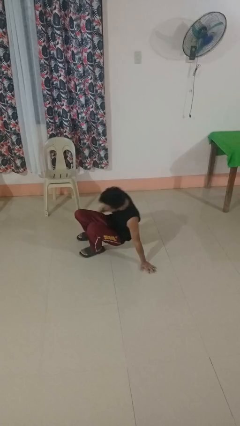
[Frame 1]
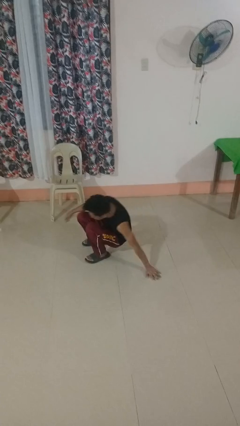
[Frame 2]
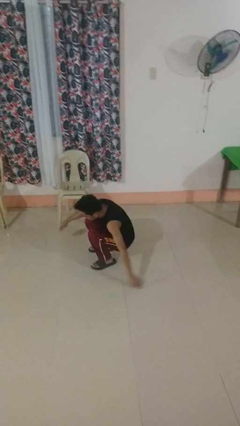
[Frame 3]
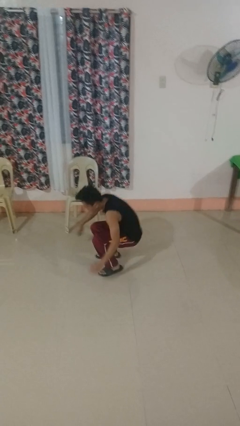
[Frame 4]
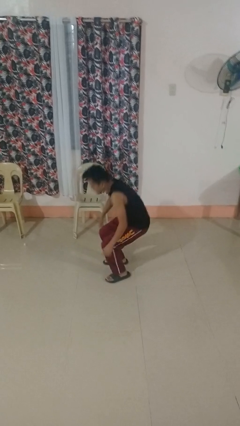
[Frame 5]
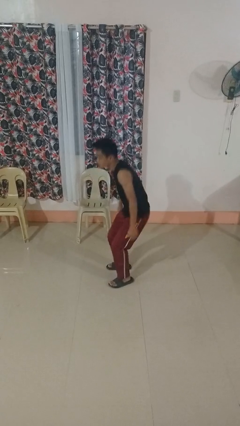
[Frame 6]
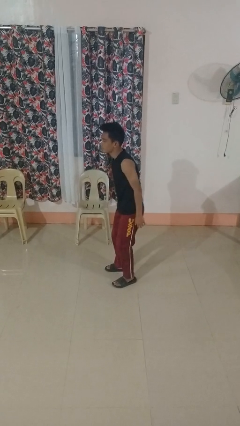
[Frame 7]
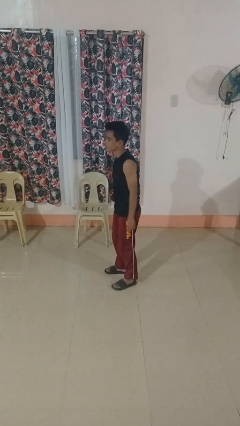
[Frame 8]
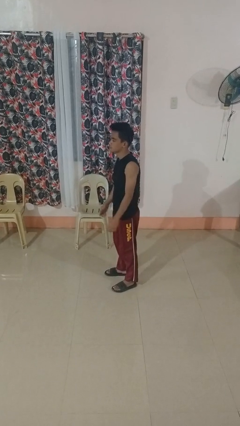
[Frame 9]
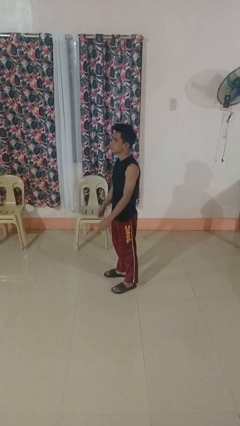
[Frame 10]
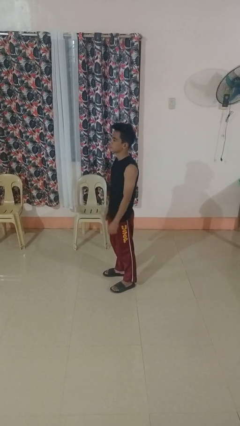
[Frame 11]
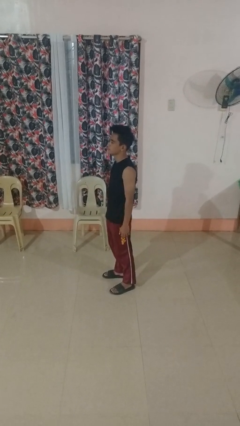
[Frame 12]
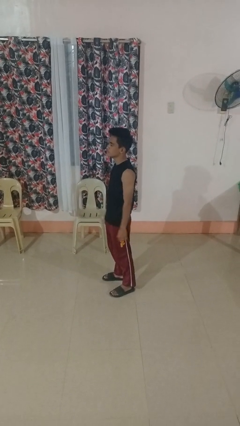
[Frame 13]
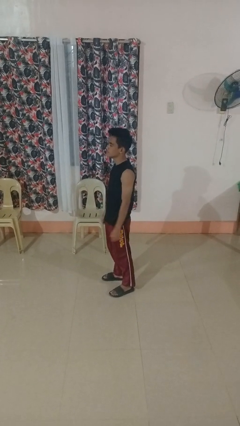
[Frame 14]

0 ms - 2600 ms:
person stands up from floor

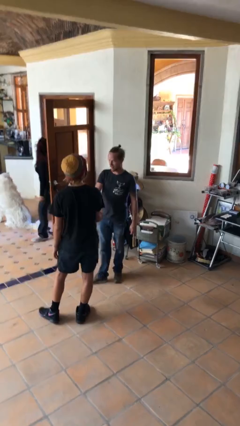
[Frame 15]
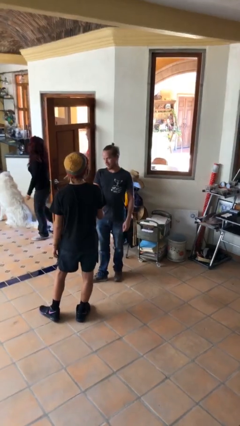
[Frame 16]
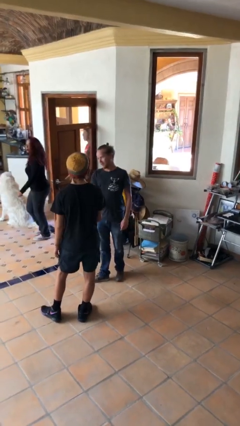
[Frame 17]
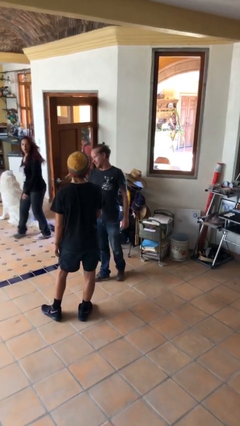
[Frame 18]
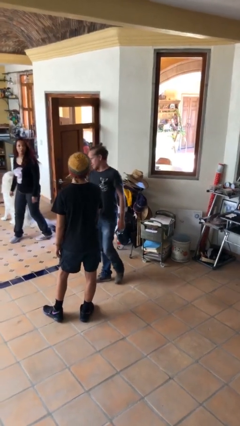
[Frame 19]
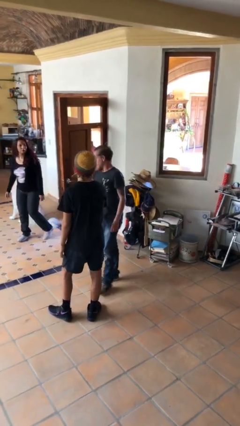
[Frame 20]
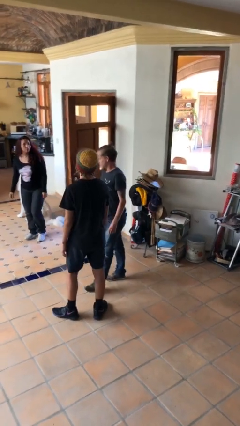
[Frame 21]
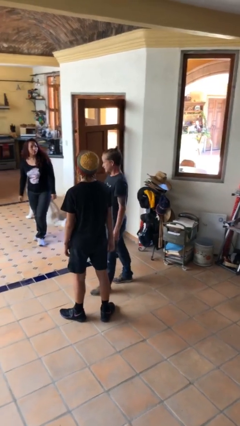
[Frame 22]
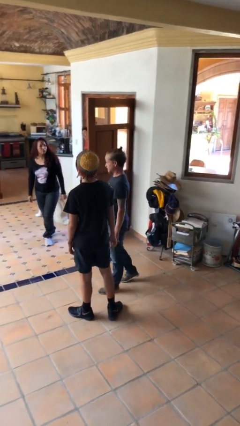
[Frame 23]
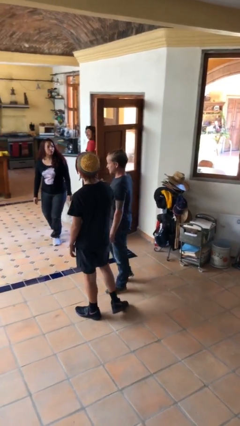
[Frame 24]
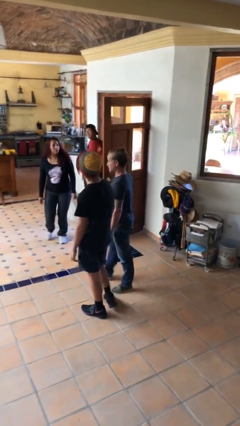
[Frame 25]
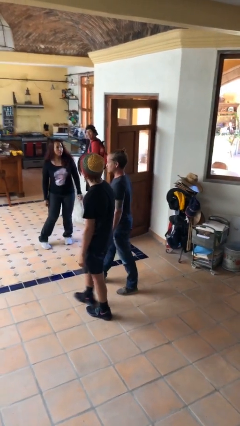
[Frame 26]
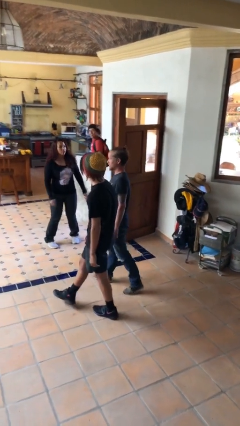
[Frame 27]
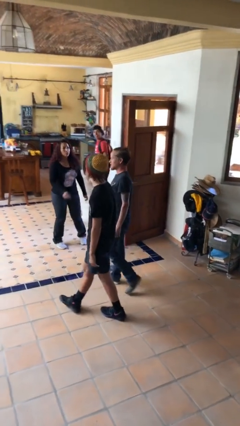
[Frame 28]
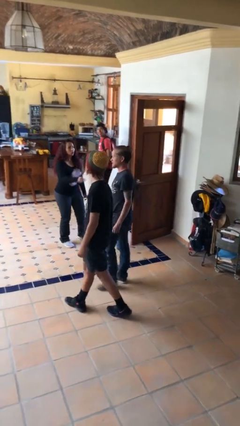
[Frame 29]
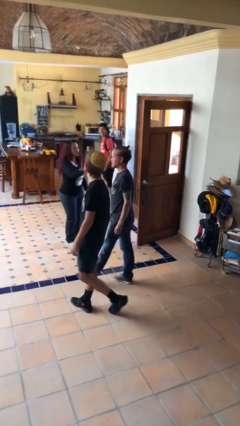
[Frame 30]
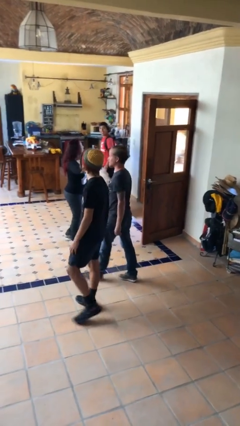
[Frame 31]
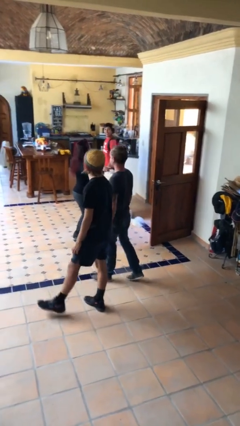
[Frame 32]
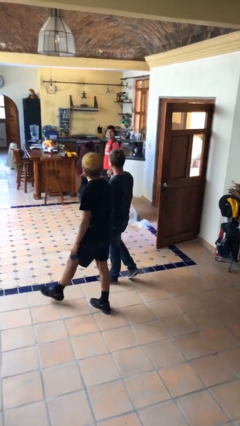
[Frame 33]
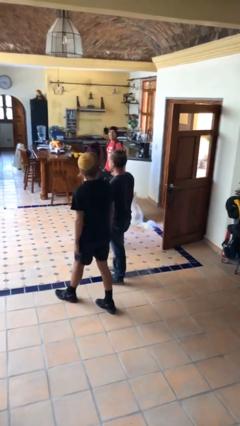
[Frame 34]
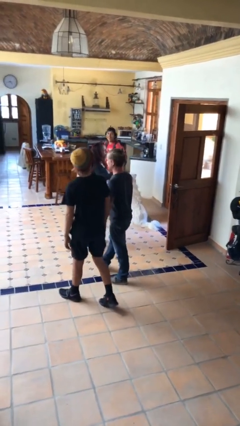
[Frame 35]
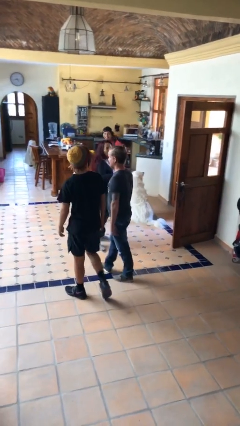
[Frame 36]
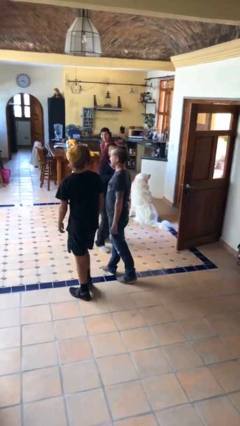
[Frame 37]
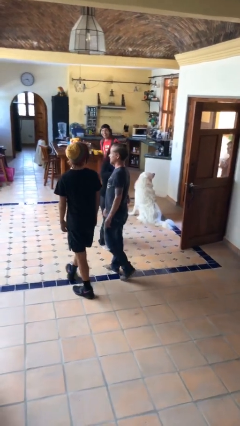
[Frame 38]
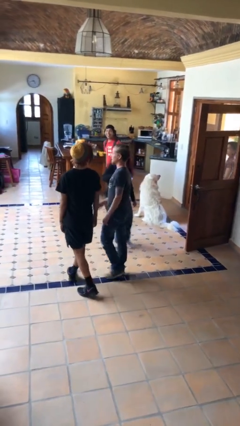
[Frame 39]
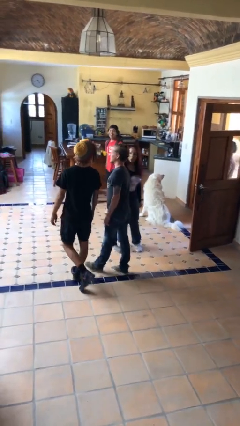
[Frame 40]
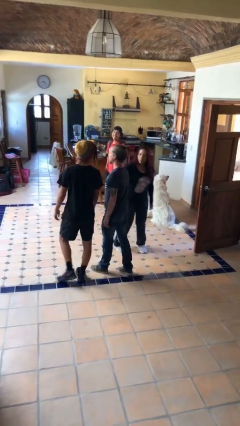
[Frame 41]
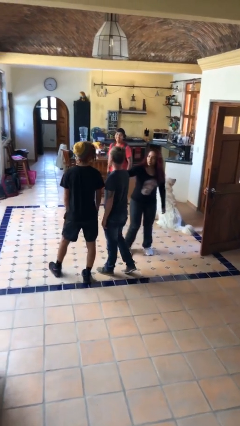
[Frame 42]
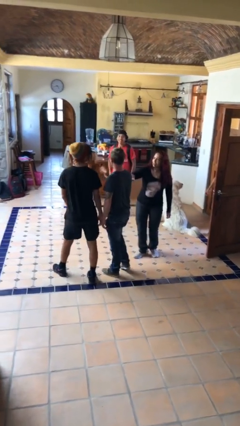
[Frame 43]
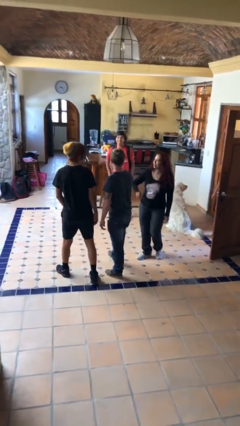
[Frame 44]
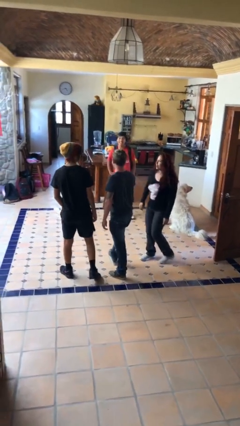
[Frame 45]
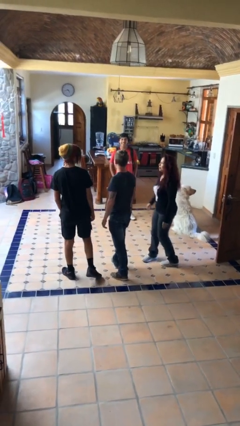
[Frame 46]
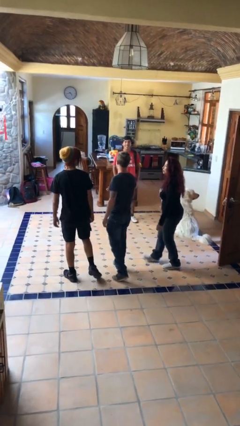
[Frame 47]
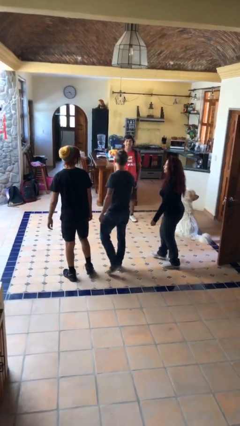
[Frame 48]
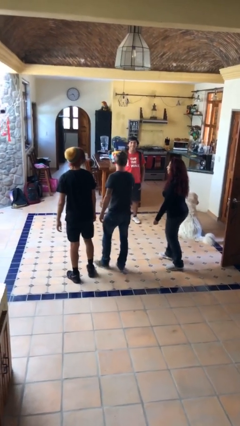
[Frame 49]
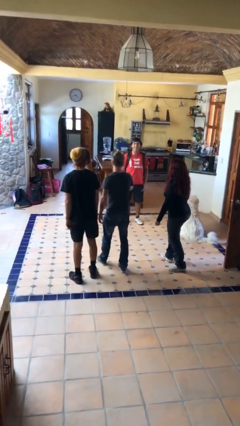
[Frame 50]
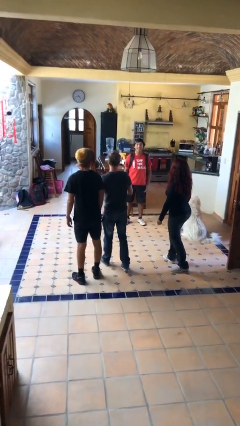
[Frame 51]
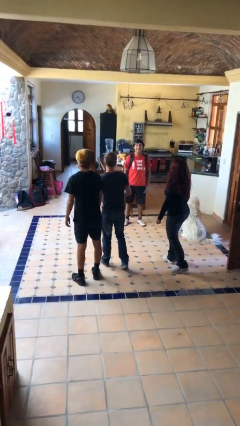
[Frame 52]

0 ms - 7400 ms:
person talks to person

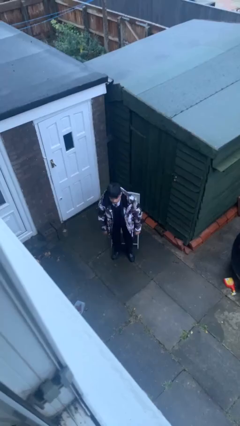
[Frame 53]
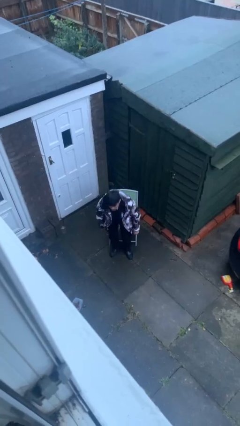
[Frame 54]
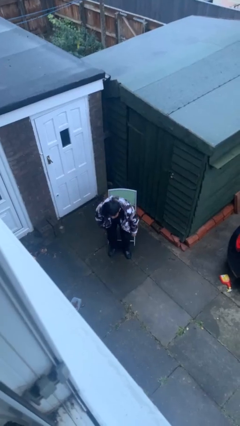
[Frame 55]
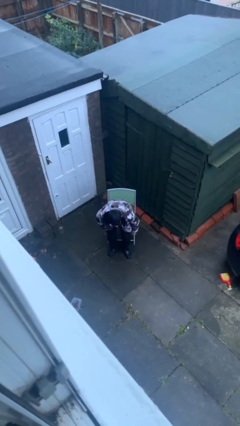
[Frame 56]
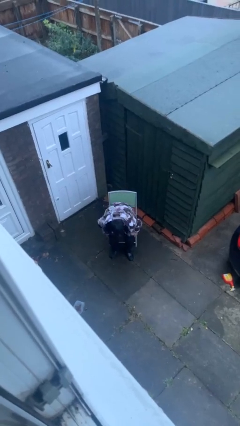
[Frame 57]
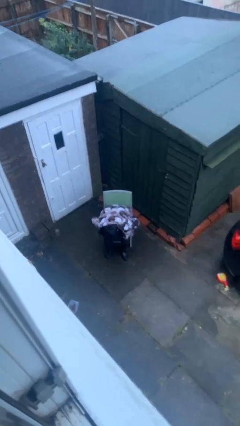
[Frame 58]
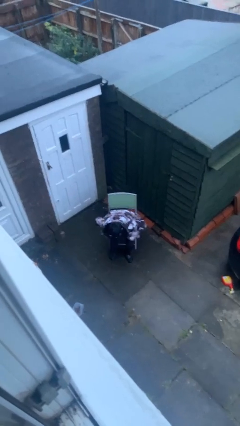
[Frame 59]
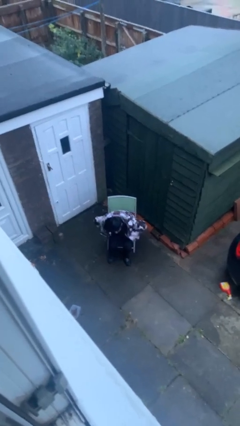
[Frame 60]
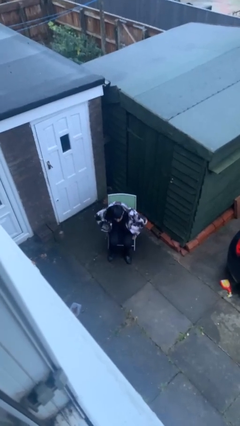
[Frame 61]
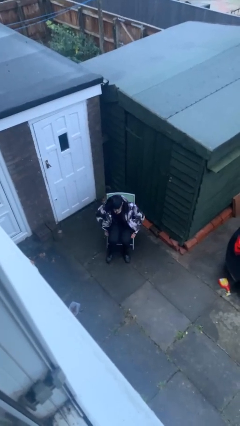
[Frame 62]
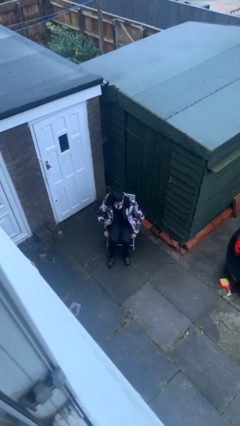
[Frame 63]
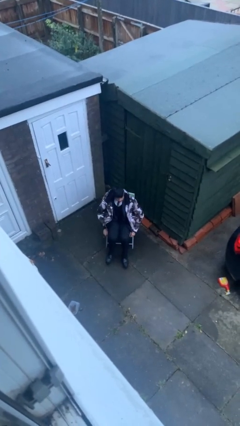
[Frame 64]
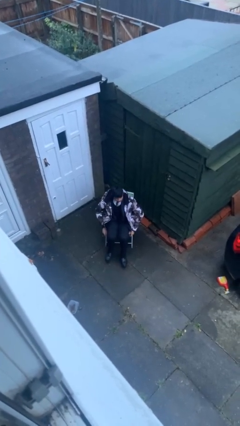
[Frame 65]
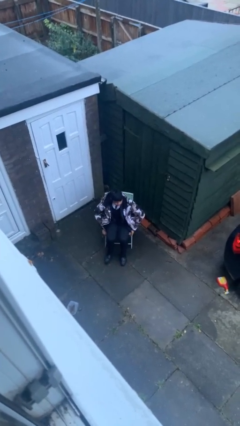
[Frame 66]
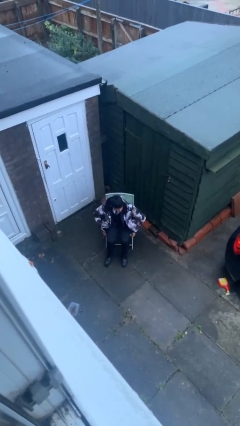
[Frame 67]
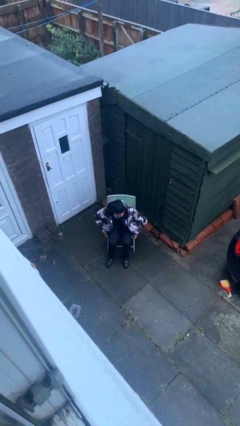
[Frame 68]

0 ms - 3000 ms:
person sits down

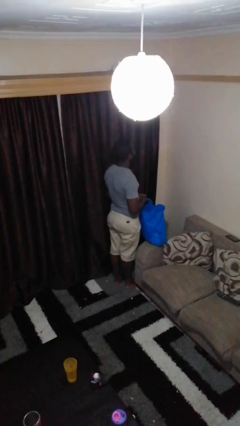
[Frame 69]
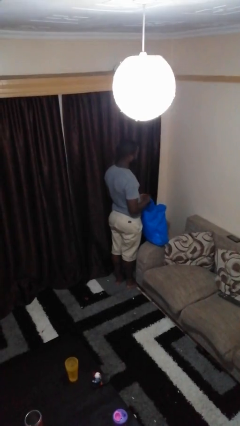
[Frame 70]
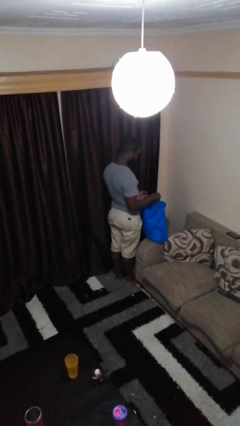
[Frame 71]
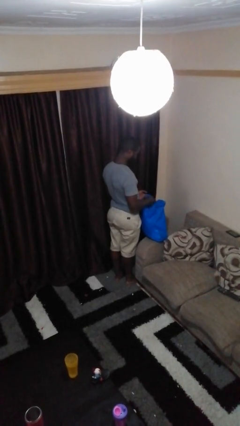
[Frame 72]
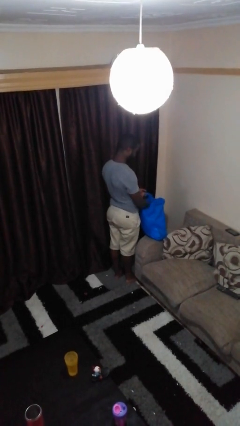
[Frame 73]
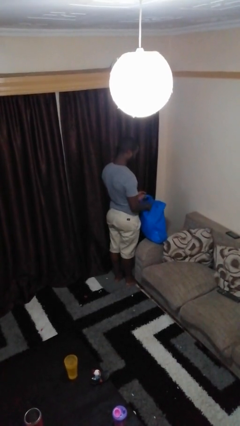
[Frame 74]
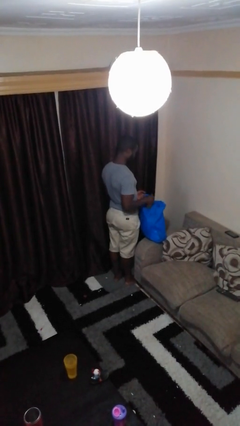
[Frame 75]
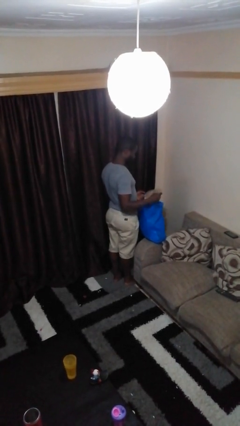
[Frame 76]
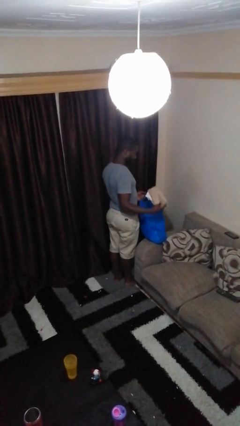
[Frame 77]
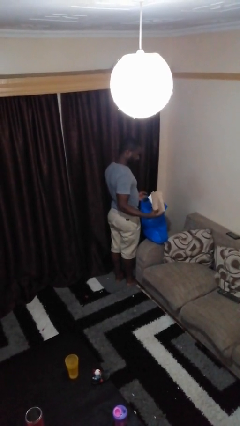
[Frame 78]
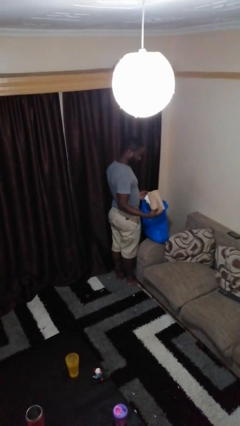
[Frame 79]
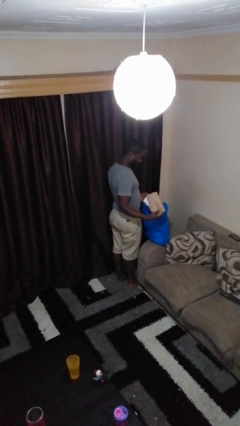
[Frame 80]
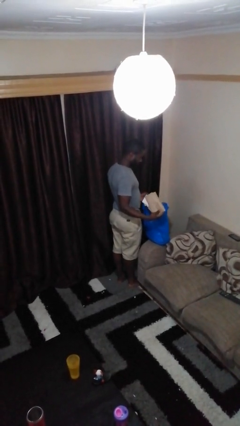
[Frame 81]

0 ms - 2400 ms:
person takes object from bag

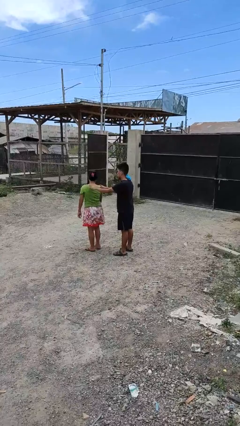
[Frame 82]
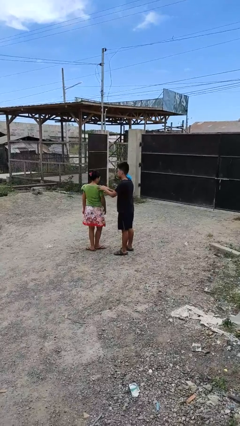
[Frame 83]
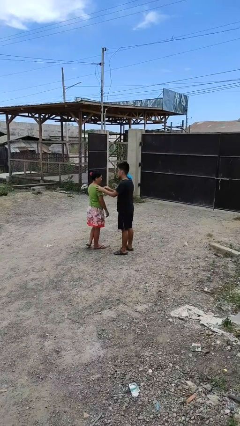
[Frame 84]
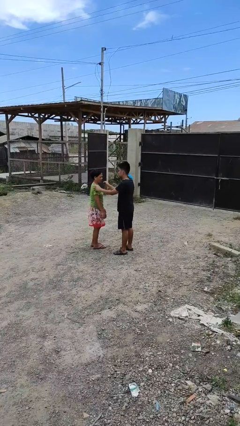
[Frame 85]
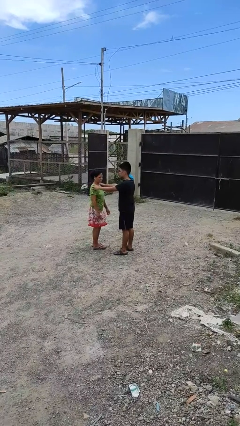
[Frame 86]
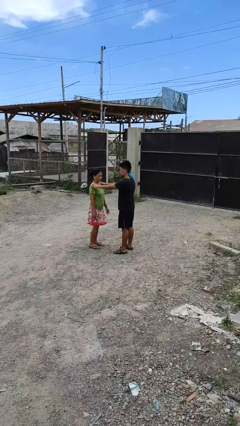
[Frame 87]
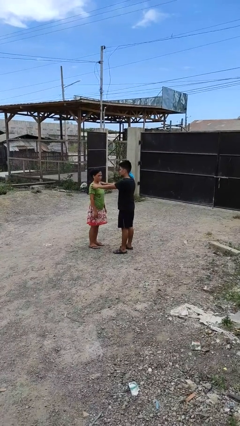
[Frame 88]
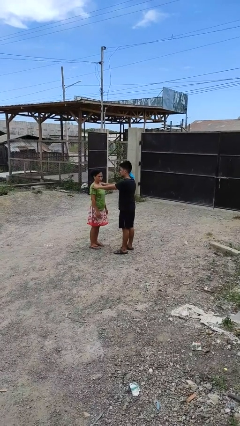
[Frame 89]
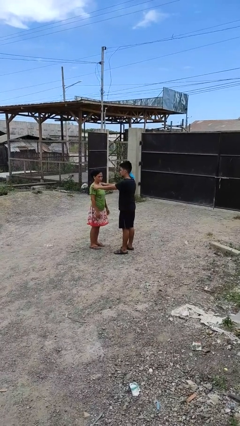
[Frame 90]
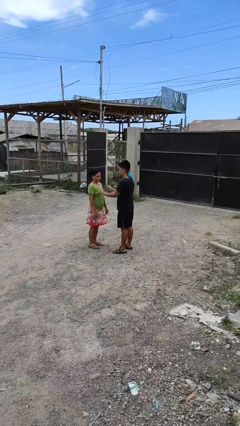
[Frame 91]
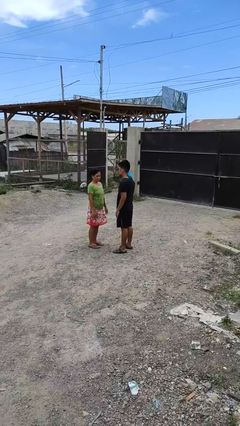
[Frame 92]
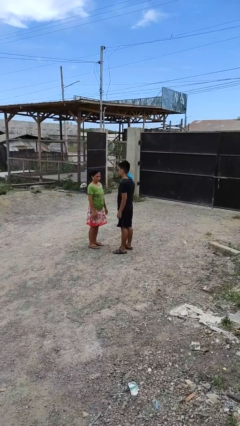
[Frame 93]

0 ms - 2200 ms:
person spins person around
